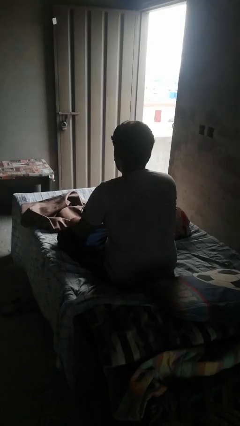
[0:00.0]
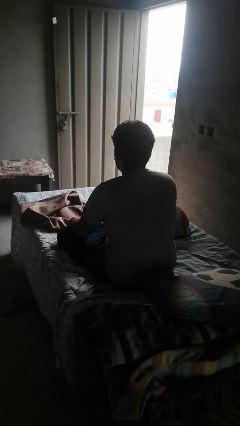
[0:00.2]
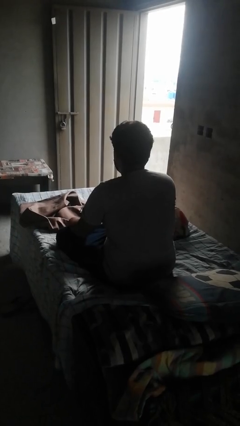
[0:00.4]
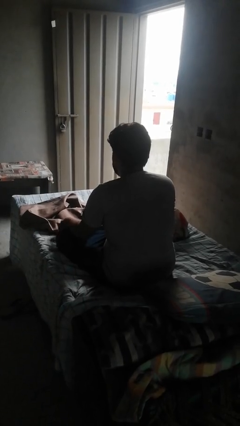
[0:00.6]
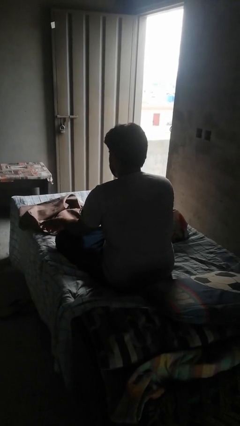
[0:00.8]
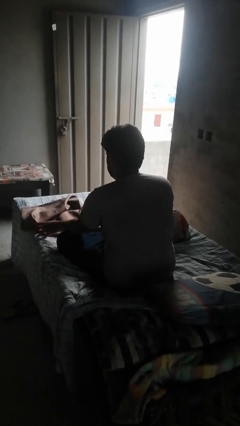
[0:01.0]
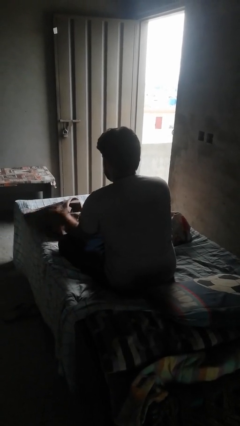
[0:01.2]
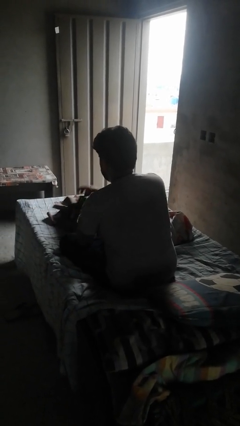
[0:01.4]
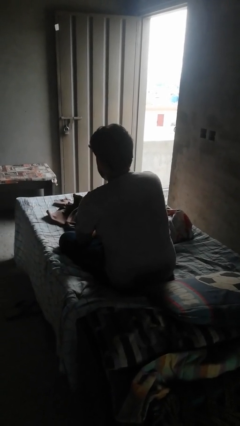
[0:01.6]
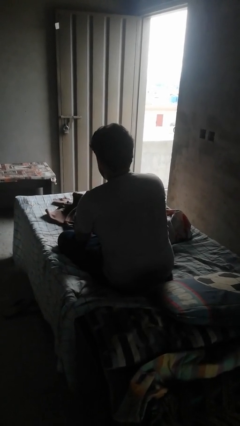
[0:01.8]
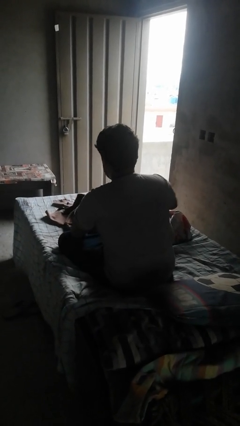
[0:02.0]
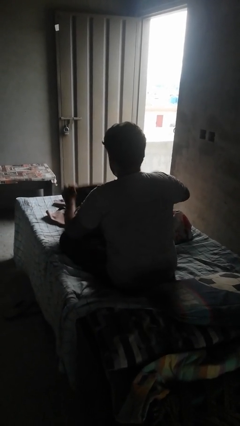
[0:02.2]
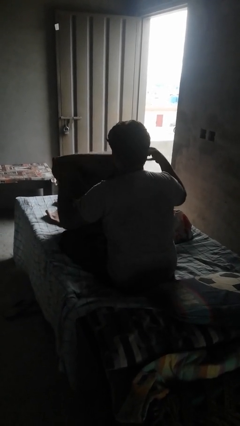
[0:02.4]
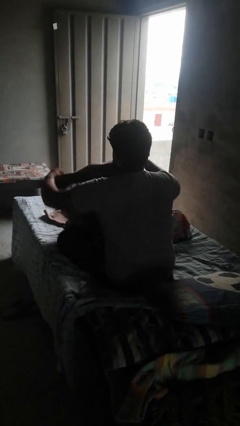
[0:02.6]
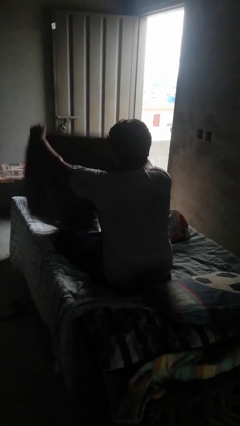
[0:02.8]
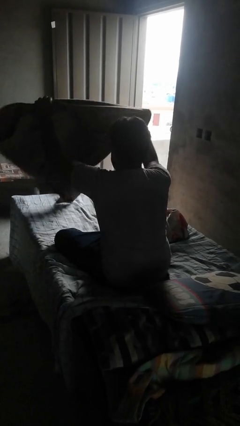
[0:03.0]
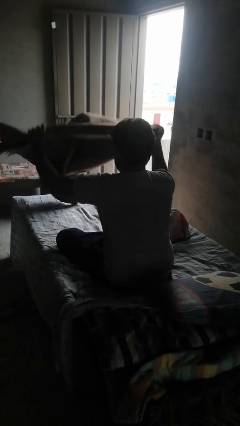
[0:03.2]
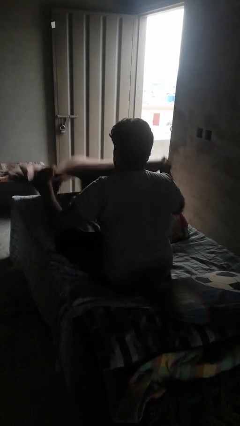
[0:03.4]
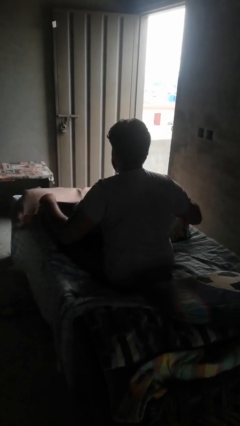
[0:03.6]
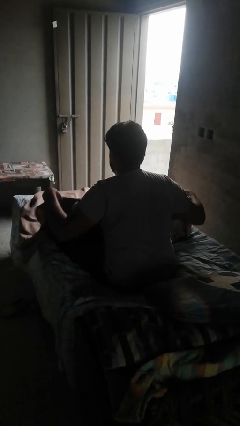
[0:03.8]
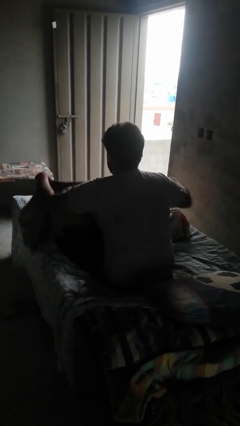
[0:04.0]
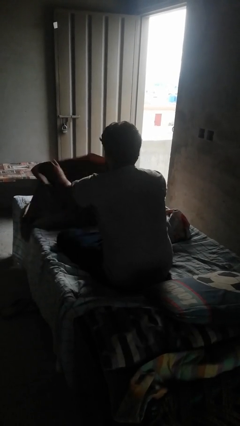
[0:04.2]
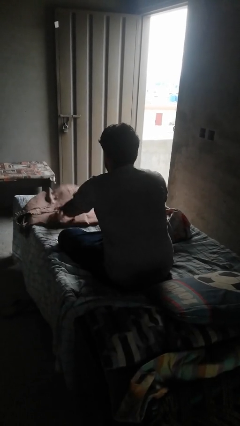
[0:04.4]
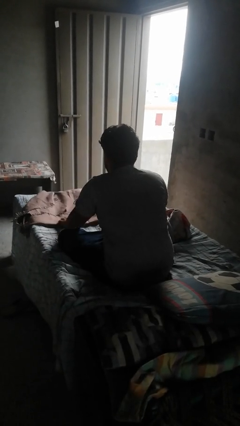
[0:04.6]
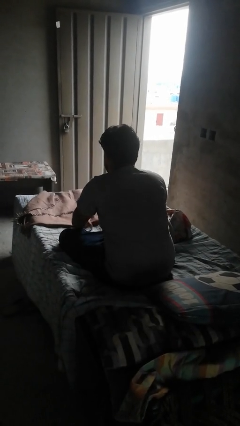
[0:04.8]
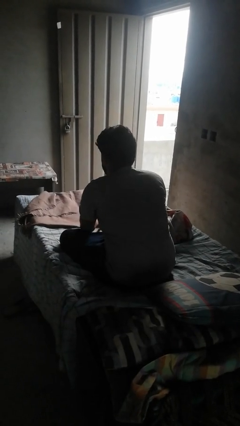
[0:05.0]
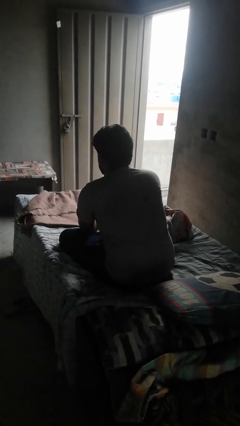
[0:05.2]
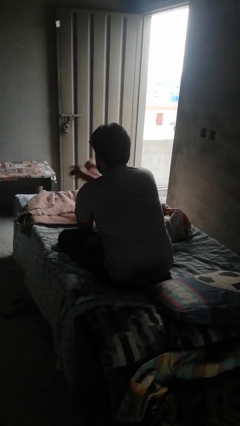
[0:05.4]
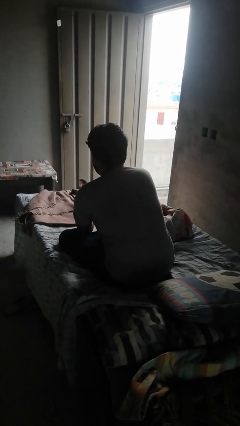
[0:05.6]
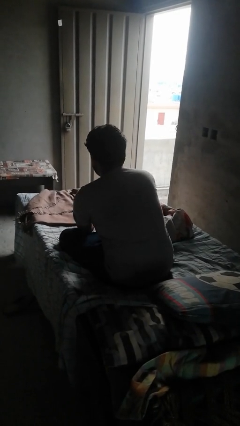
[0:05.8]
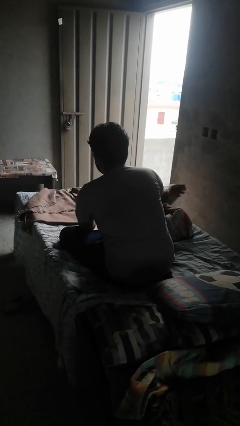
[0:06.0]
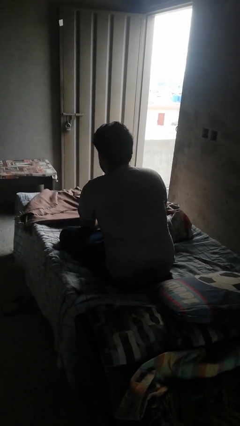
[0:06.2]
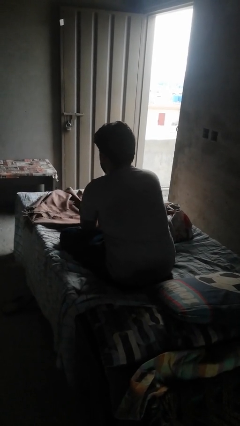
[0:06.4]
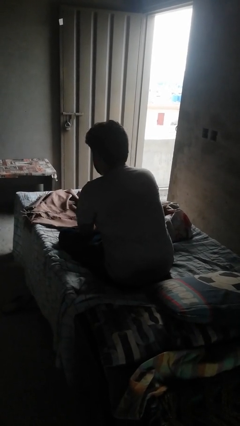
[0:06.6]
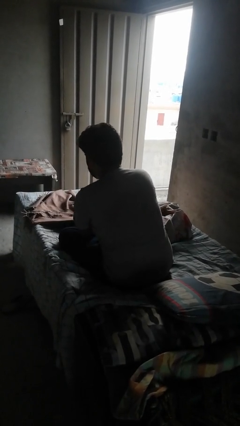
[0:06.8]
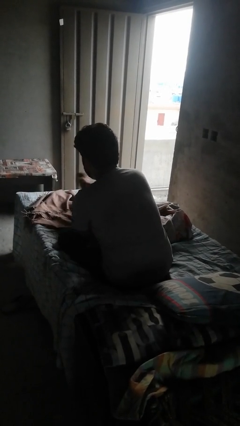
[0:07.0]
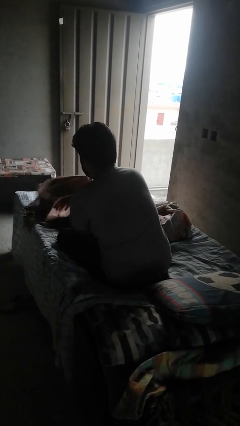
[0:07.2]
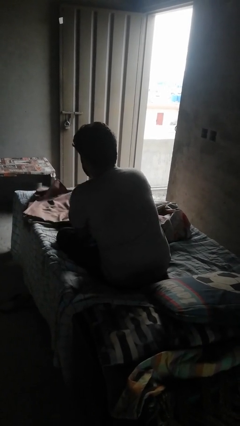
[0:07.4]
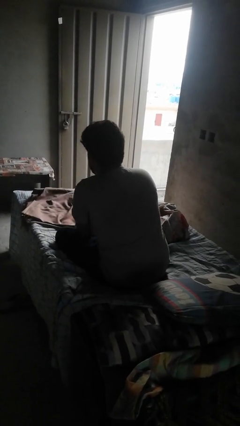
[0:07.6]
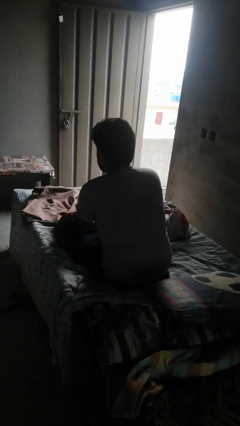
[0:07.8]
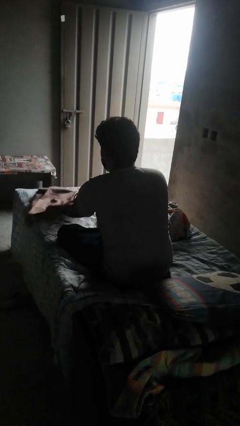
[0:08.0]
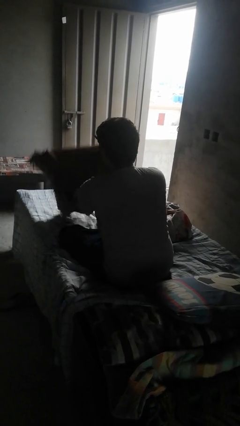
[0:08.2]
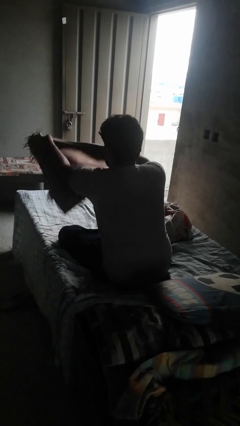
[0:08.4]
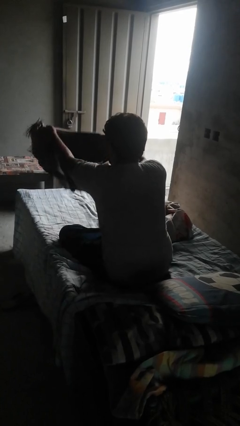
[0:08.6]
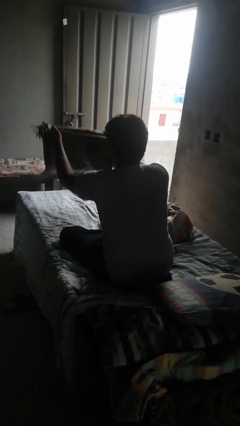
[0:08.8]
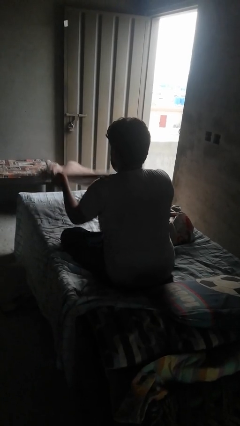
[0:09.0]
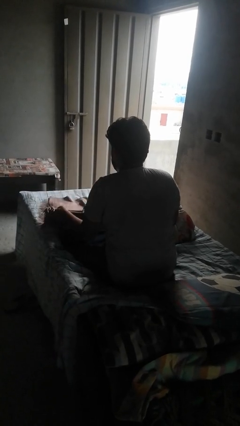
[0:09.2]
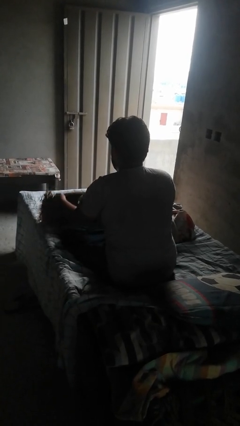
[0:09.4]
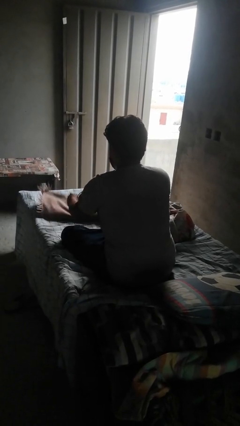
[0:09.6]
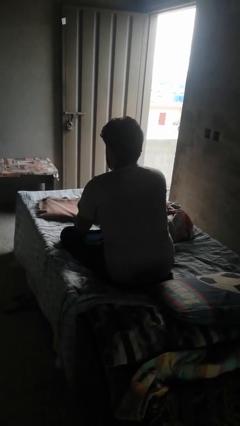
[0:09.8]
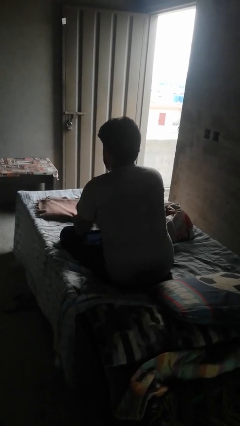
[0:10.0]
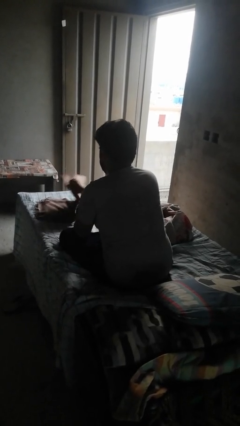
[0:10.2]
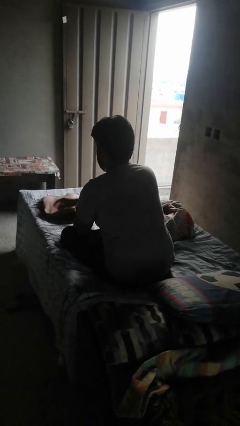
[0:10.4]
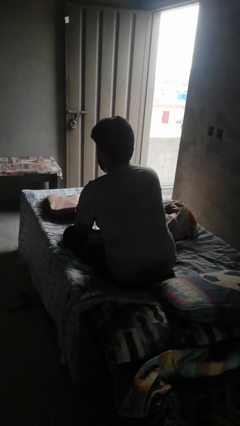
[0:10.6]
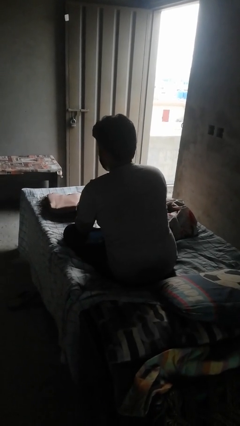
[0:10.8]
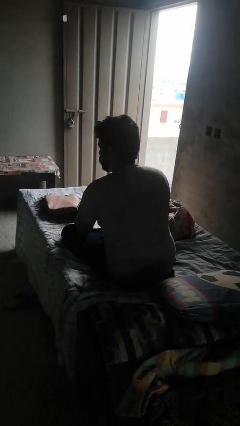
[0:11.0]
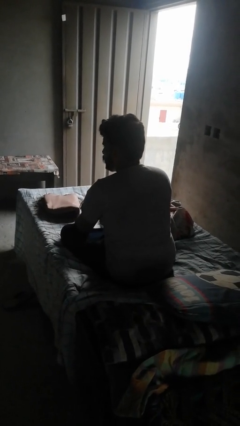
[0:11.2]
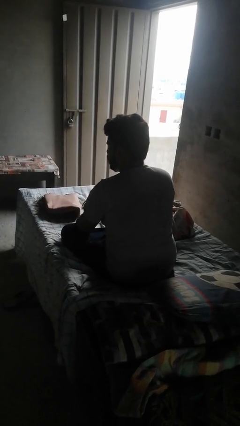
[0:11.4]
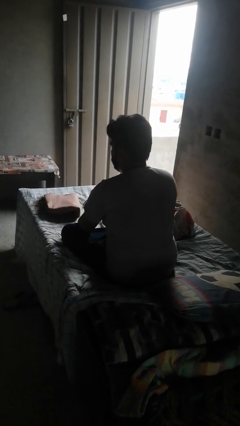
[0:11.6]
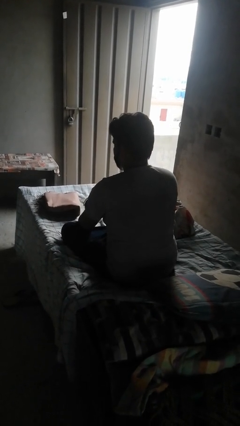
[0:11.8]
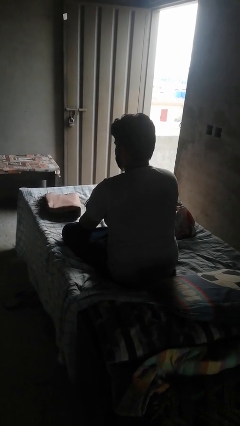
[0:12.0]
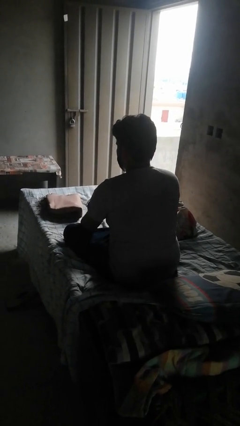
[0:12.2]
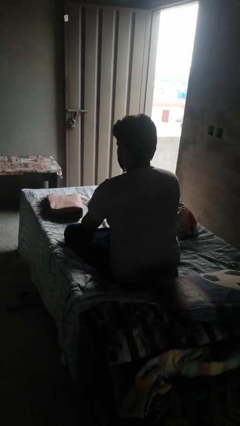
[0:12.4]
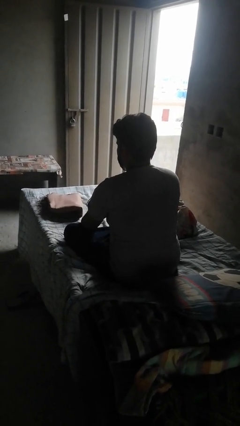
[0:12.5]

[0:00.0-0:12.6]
person folds blanket

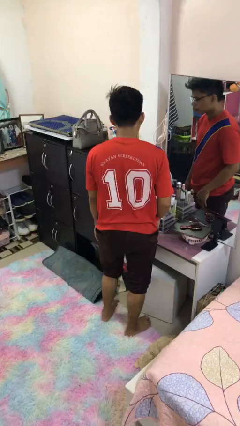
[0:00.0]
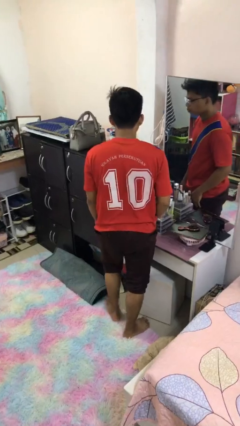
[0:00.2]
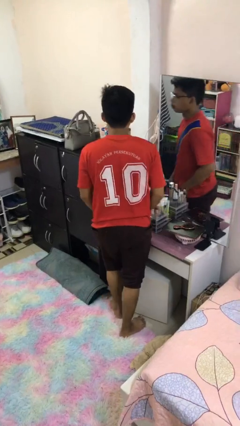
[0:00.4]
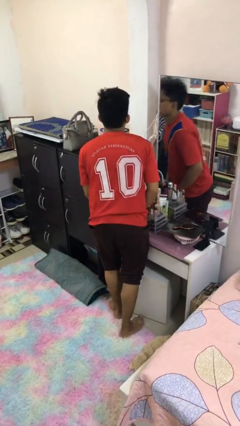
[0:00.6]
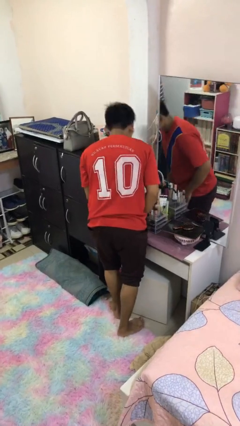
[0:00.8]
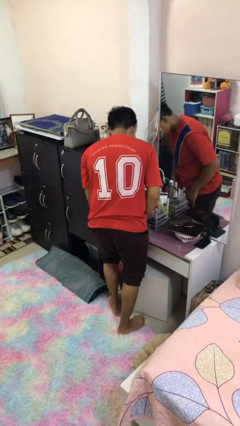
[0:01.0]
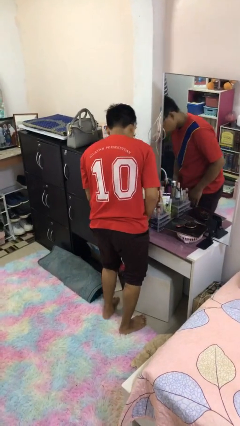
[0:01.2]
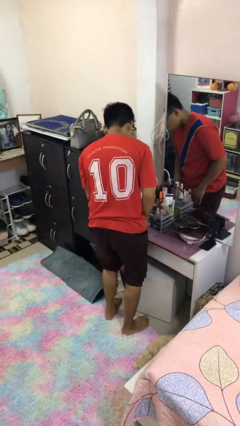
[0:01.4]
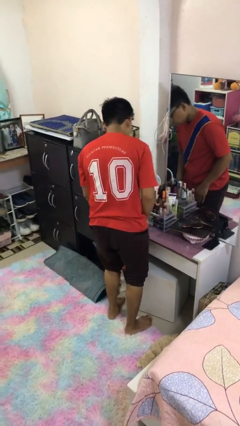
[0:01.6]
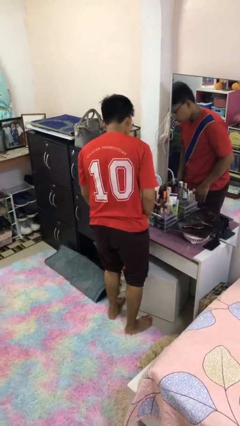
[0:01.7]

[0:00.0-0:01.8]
person bumps into table

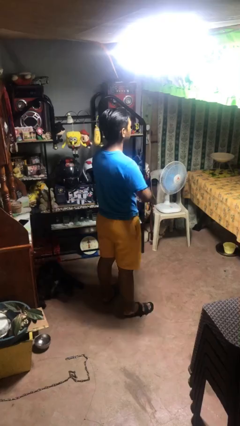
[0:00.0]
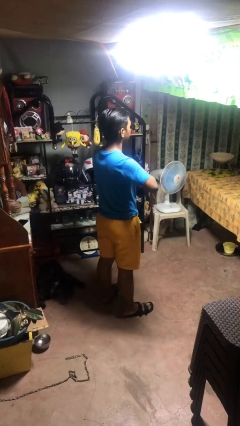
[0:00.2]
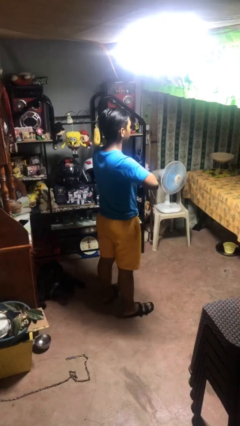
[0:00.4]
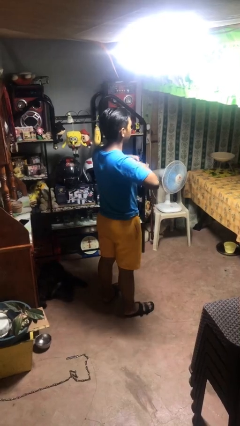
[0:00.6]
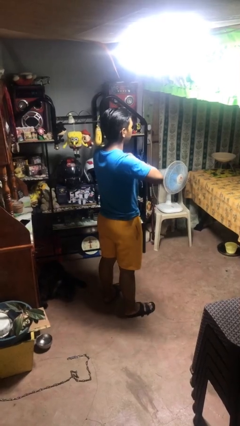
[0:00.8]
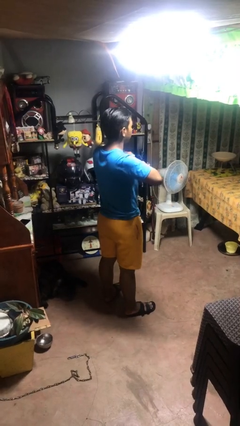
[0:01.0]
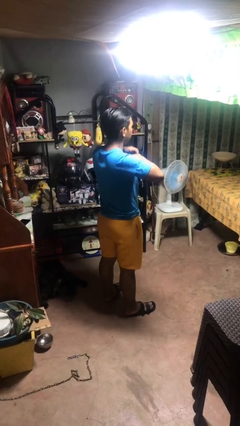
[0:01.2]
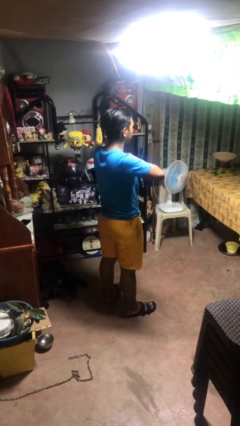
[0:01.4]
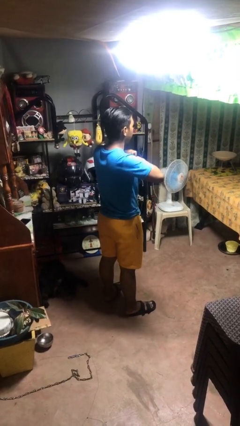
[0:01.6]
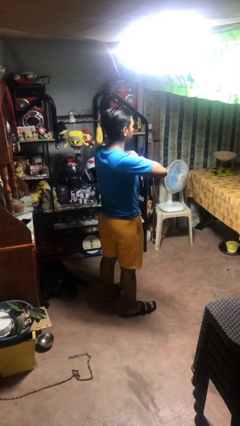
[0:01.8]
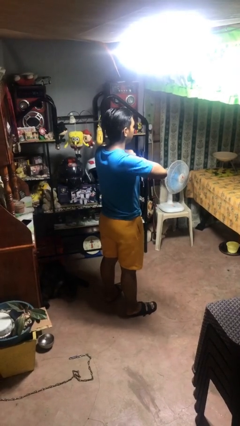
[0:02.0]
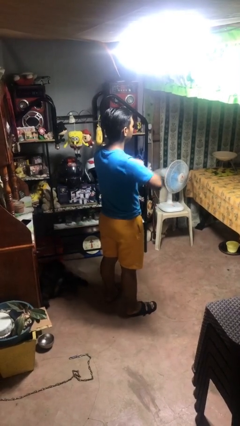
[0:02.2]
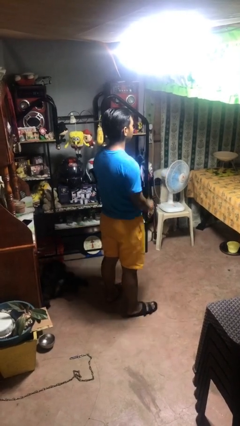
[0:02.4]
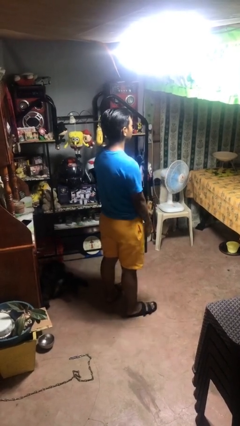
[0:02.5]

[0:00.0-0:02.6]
person cracks knuckles

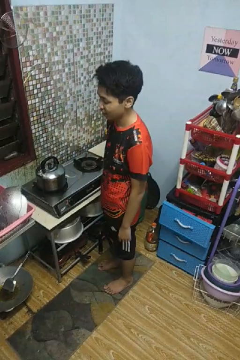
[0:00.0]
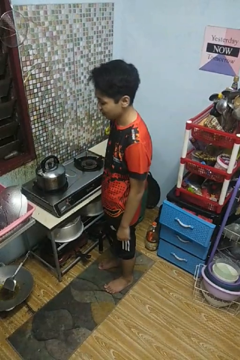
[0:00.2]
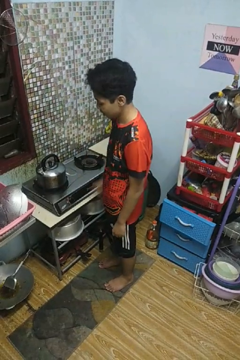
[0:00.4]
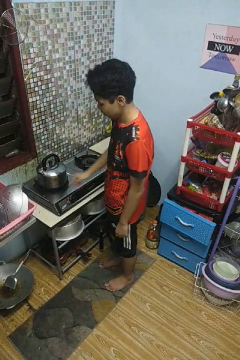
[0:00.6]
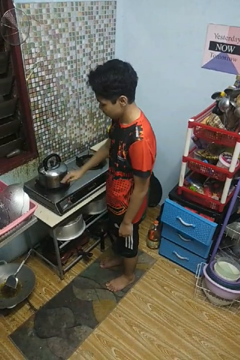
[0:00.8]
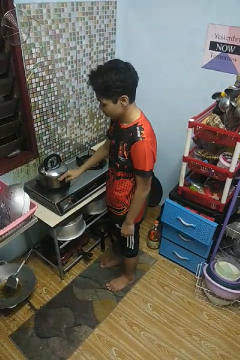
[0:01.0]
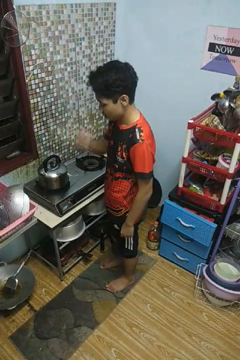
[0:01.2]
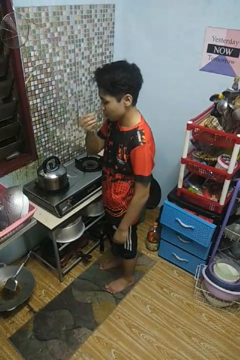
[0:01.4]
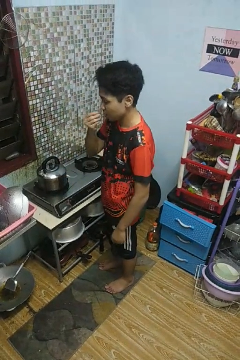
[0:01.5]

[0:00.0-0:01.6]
person burns hand
